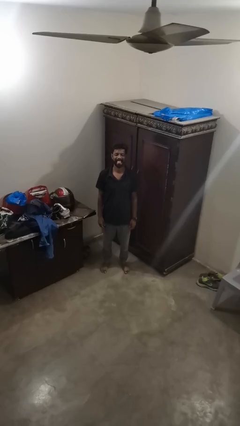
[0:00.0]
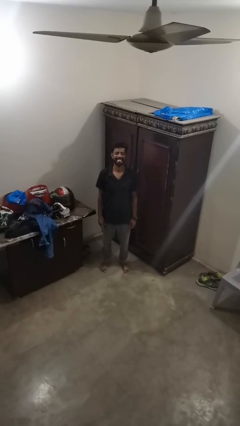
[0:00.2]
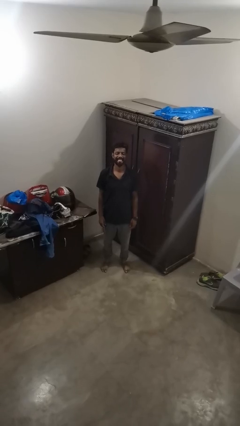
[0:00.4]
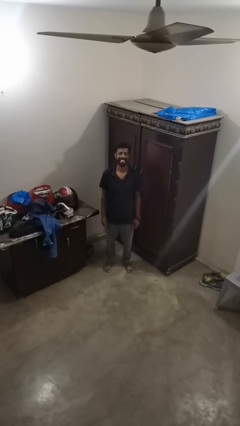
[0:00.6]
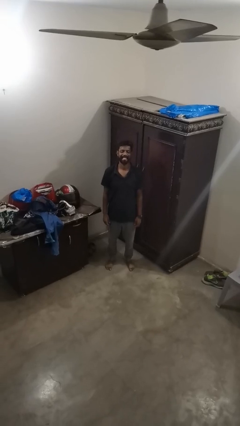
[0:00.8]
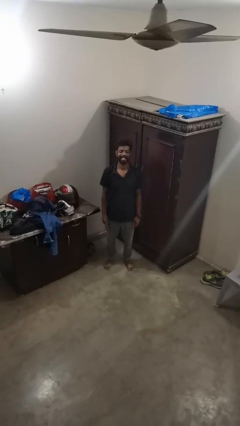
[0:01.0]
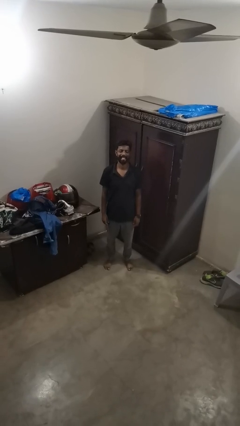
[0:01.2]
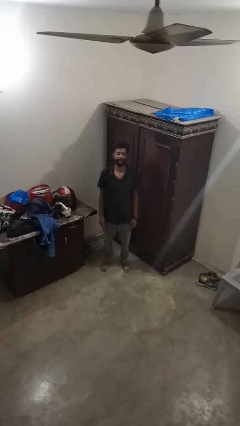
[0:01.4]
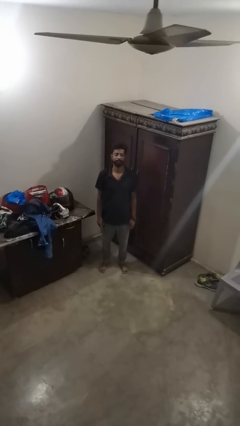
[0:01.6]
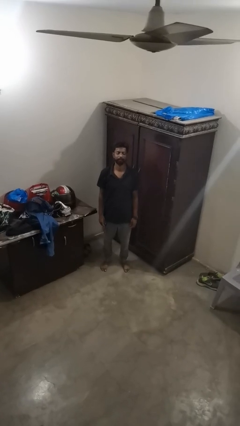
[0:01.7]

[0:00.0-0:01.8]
person sticks out tongue

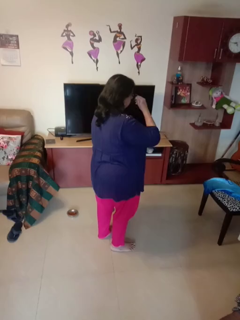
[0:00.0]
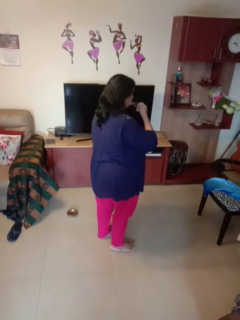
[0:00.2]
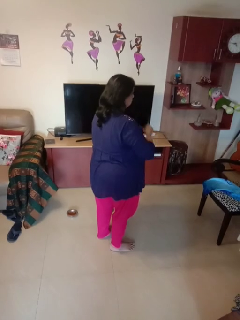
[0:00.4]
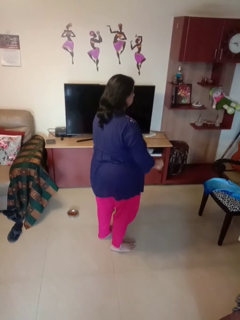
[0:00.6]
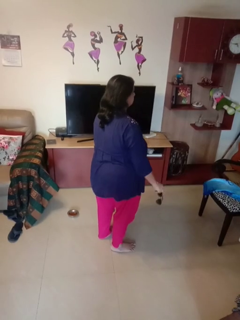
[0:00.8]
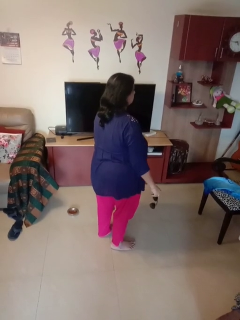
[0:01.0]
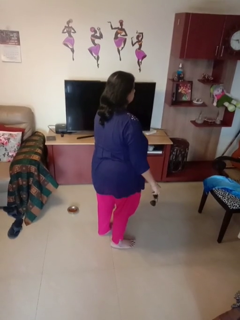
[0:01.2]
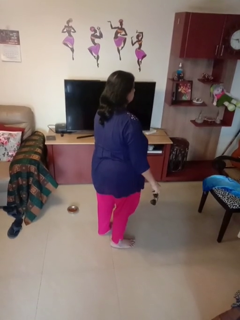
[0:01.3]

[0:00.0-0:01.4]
person takes off sunglasses

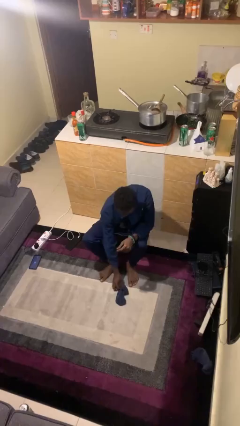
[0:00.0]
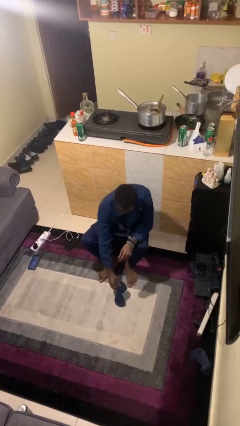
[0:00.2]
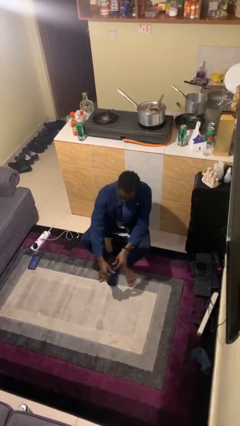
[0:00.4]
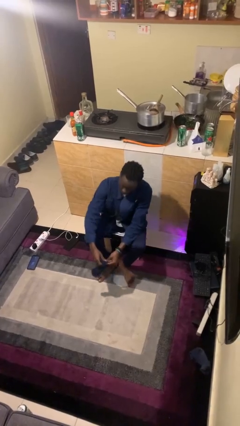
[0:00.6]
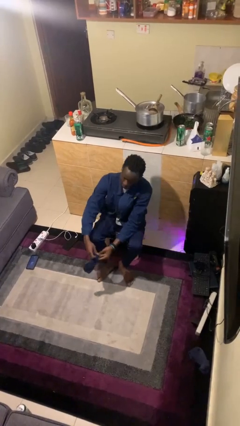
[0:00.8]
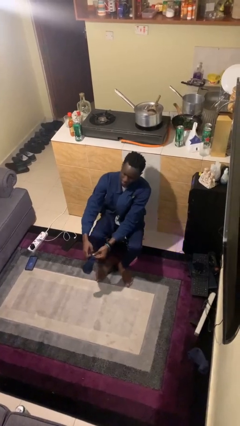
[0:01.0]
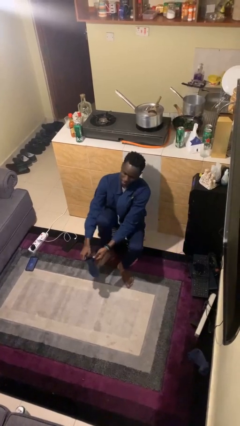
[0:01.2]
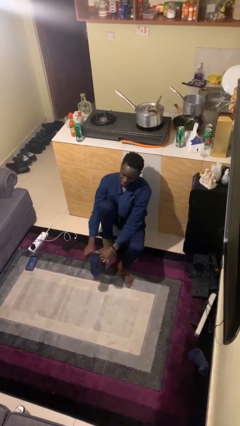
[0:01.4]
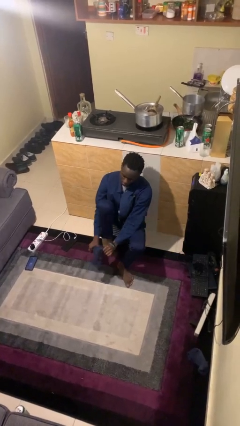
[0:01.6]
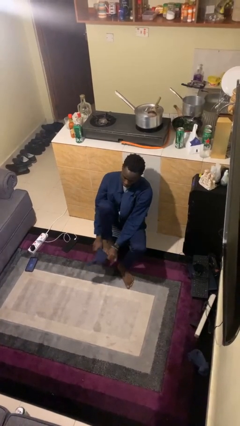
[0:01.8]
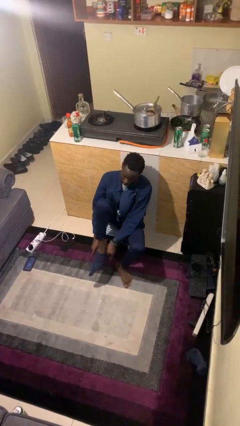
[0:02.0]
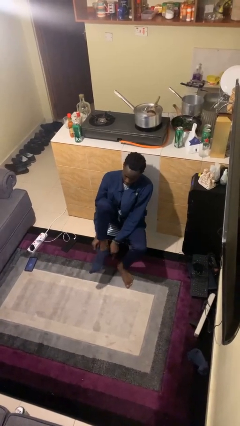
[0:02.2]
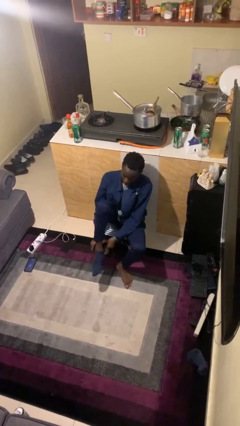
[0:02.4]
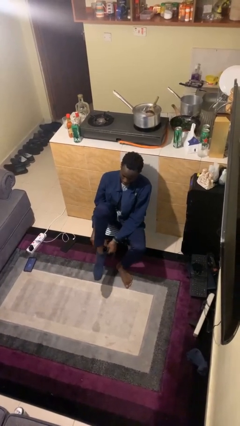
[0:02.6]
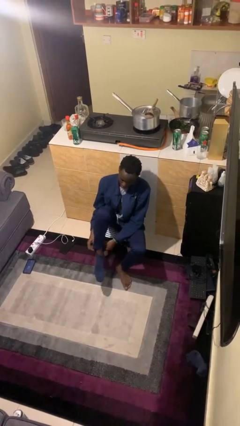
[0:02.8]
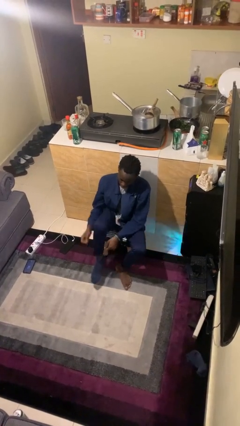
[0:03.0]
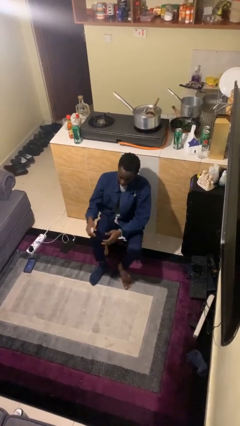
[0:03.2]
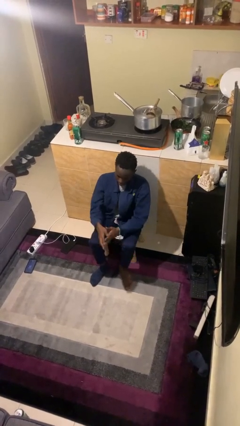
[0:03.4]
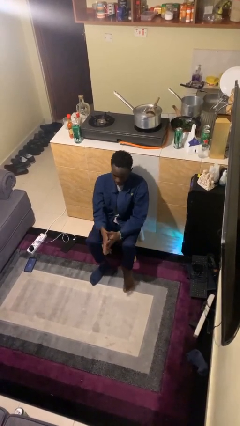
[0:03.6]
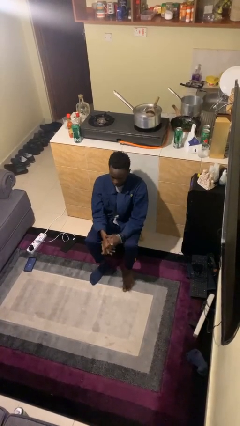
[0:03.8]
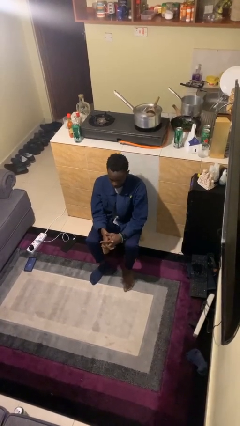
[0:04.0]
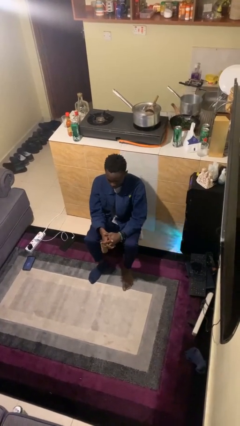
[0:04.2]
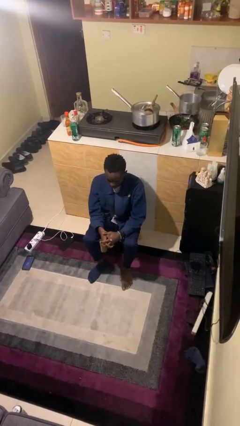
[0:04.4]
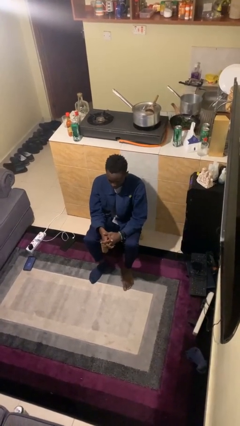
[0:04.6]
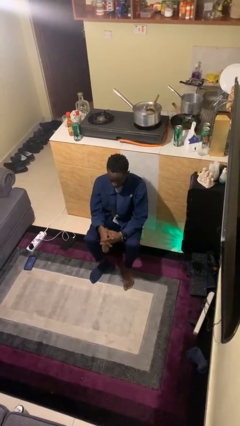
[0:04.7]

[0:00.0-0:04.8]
person puts on socks

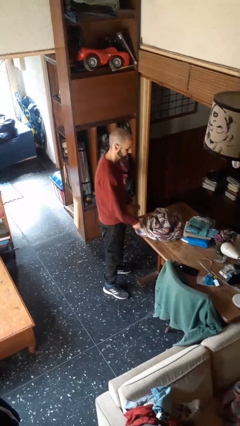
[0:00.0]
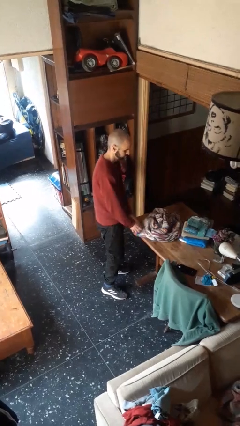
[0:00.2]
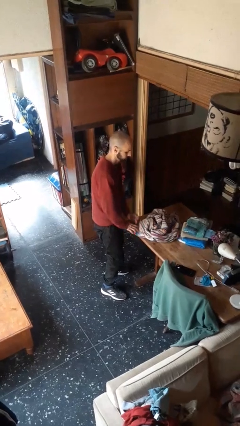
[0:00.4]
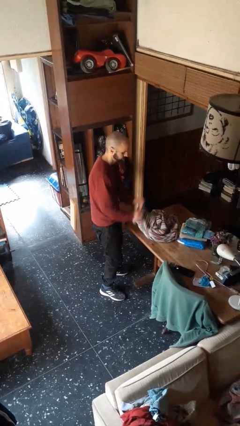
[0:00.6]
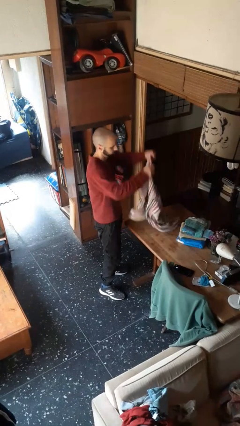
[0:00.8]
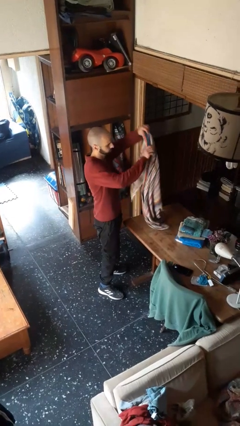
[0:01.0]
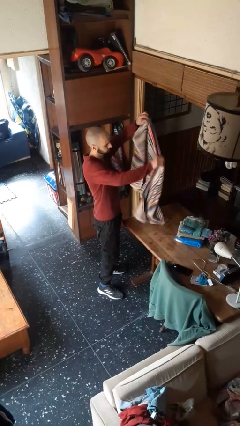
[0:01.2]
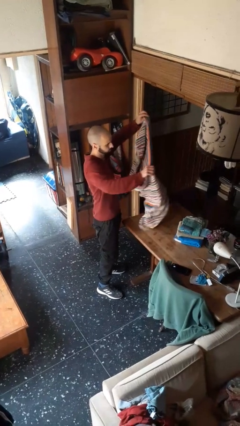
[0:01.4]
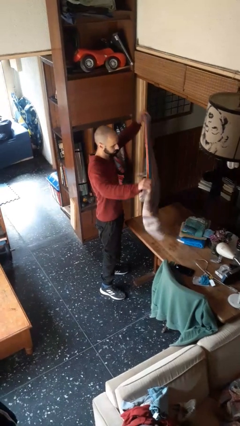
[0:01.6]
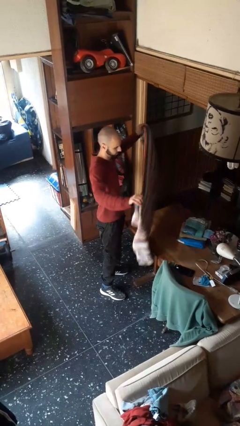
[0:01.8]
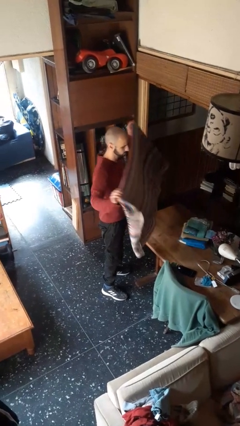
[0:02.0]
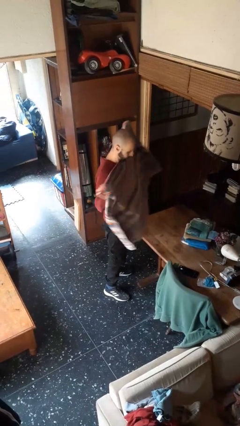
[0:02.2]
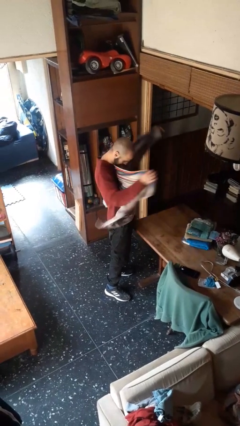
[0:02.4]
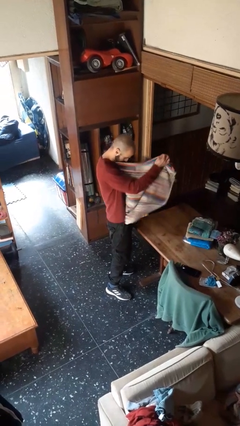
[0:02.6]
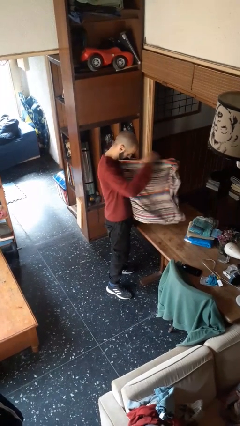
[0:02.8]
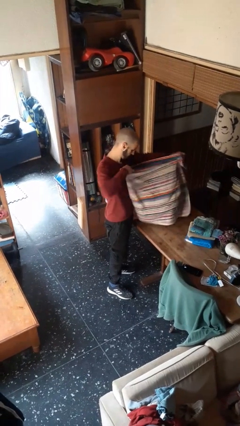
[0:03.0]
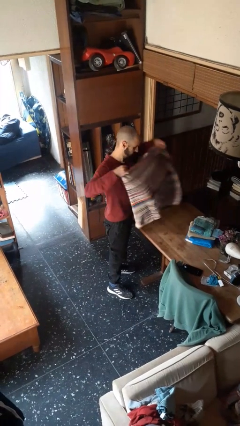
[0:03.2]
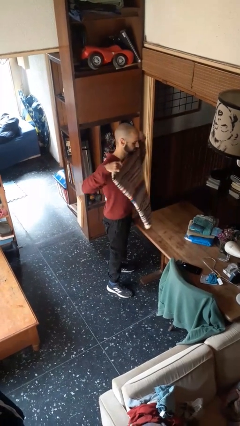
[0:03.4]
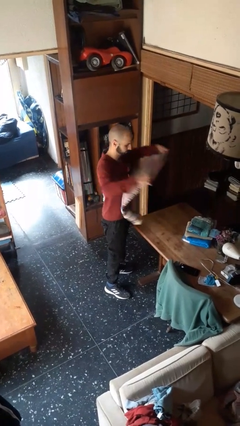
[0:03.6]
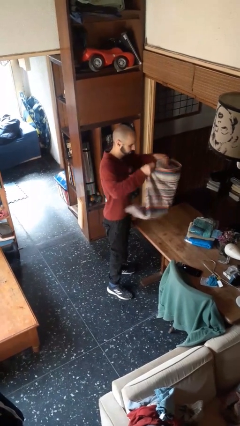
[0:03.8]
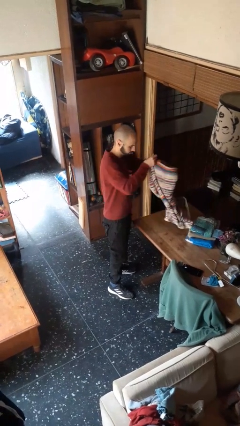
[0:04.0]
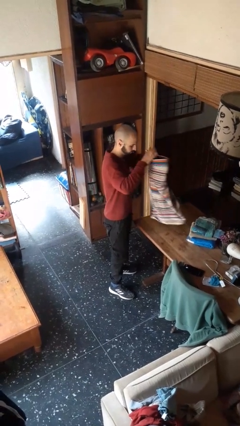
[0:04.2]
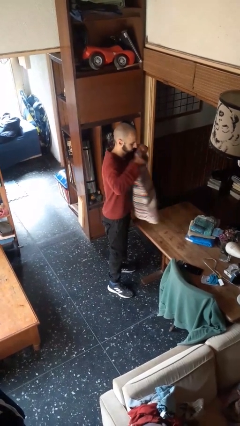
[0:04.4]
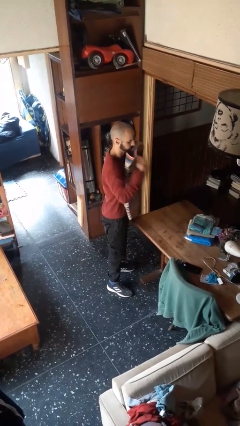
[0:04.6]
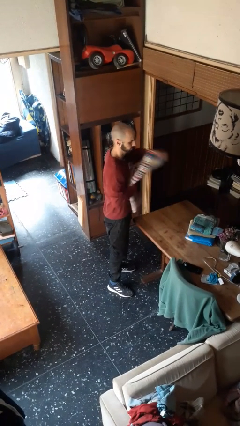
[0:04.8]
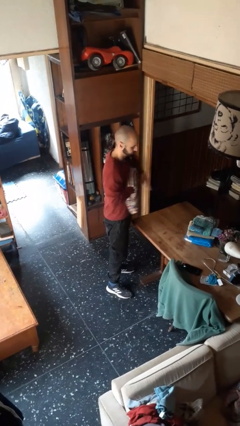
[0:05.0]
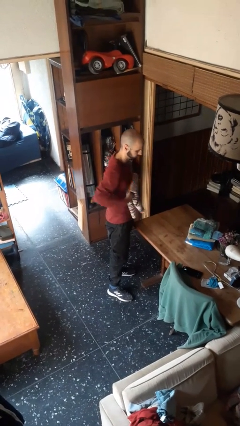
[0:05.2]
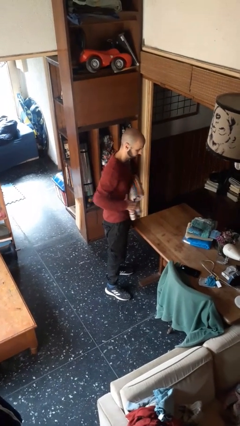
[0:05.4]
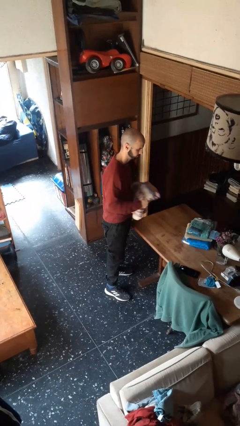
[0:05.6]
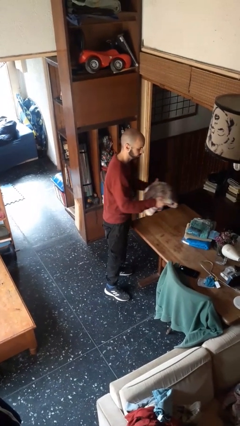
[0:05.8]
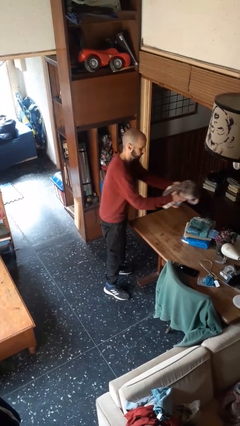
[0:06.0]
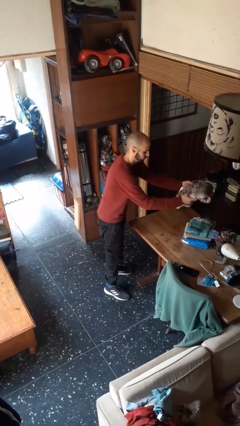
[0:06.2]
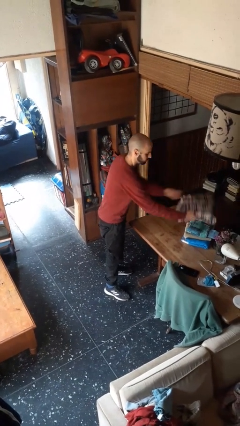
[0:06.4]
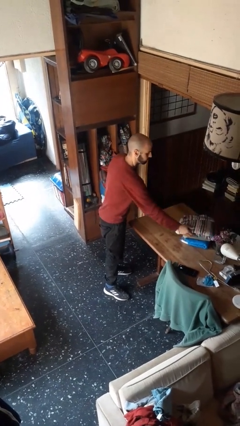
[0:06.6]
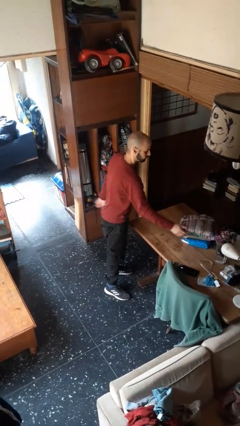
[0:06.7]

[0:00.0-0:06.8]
person folds towel

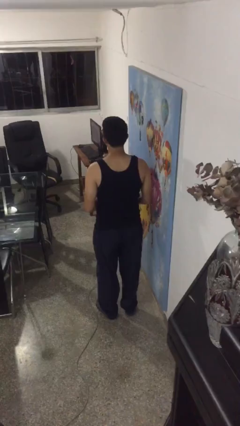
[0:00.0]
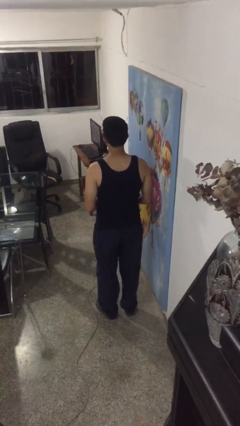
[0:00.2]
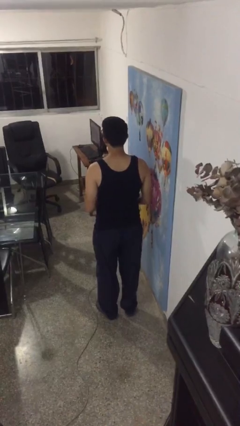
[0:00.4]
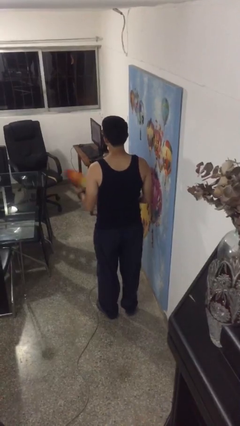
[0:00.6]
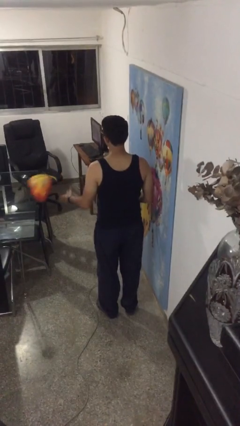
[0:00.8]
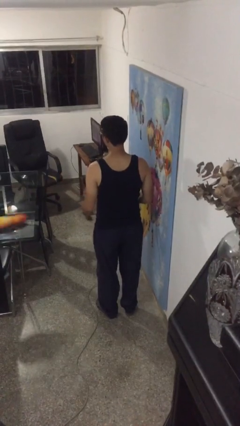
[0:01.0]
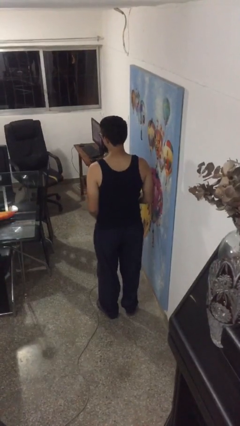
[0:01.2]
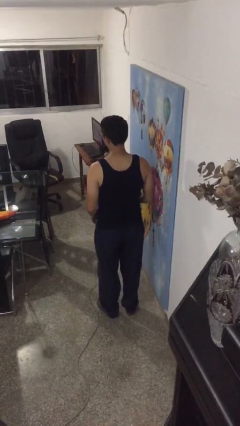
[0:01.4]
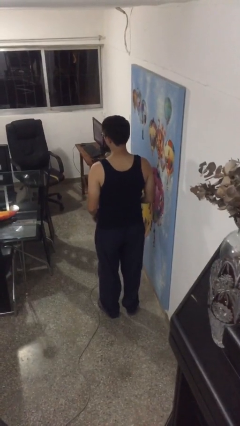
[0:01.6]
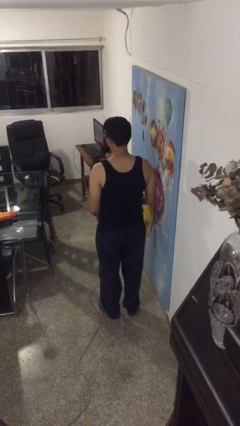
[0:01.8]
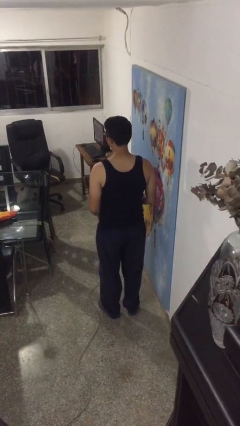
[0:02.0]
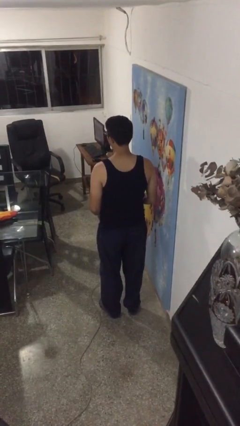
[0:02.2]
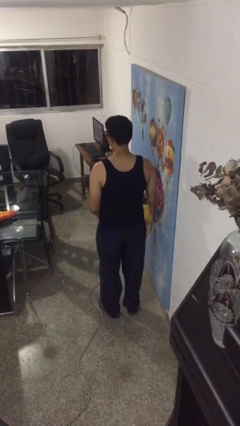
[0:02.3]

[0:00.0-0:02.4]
person throws object on table

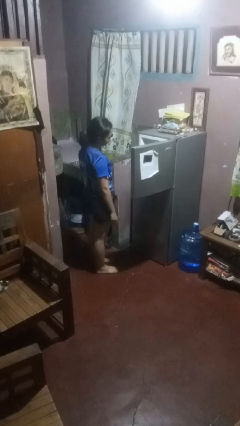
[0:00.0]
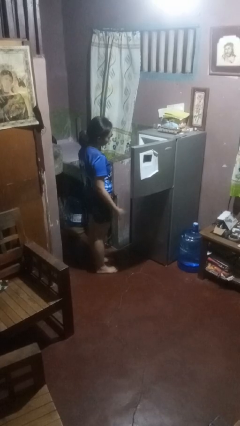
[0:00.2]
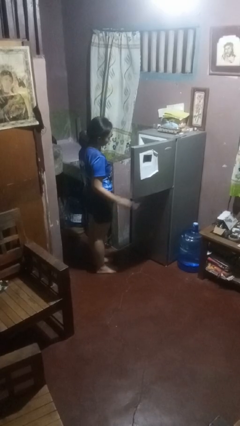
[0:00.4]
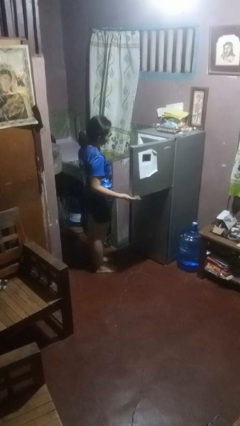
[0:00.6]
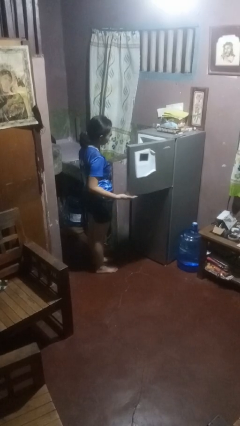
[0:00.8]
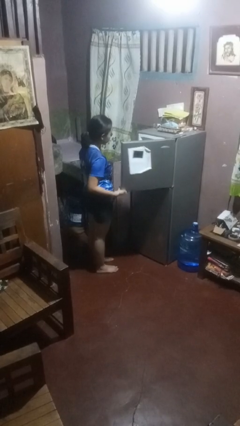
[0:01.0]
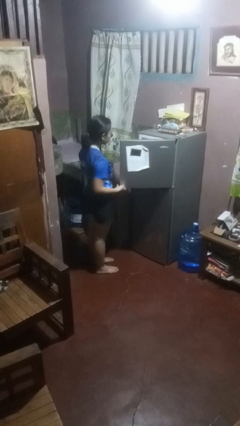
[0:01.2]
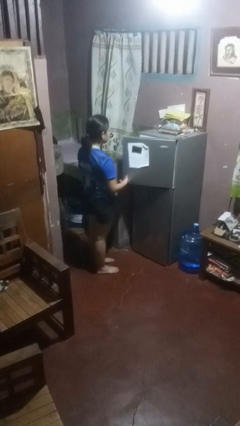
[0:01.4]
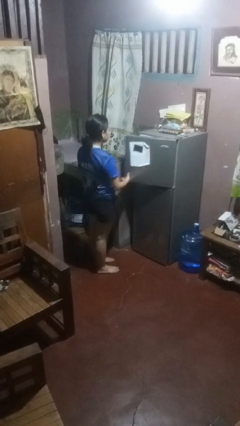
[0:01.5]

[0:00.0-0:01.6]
person closes refrigerator
